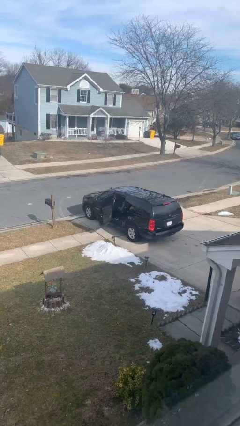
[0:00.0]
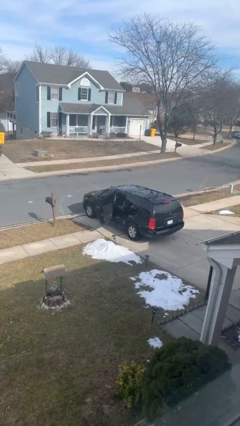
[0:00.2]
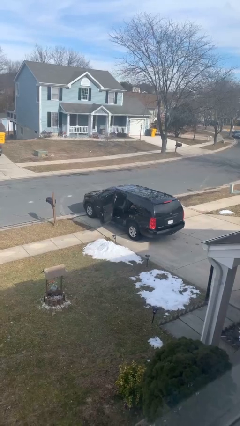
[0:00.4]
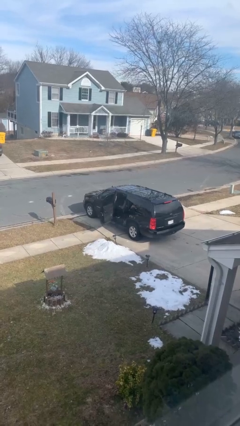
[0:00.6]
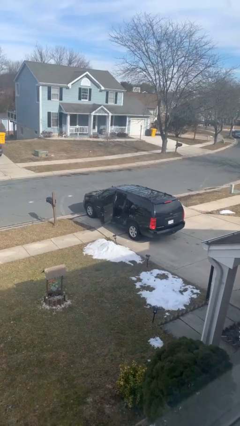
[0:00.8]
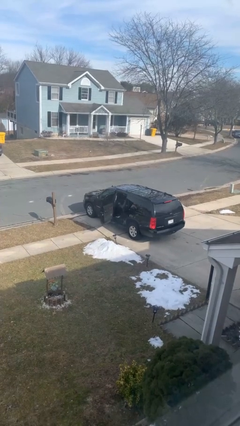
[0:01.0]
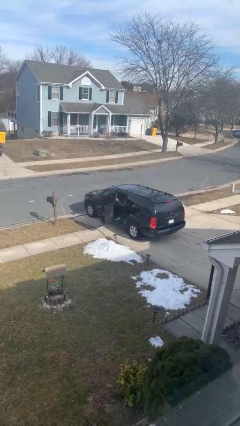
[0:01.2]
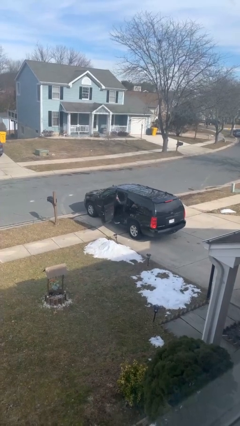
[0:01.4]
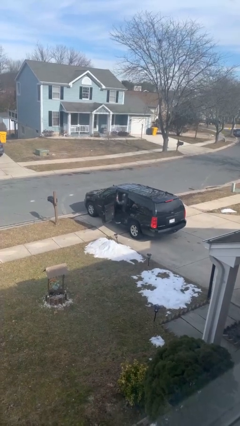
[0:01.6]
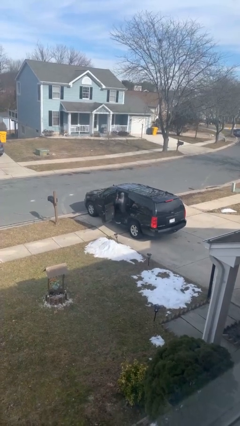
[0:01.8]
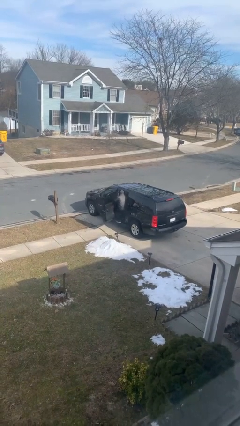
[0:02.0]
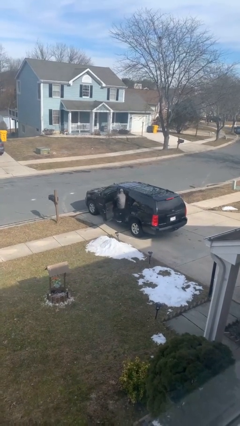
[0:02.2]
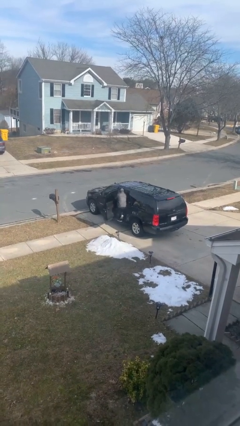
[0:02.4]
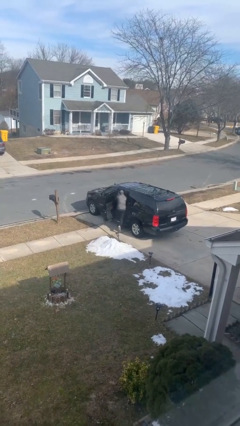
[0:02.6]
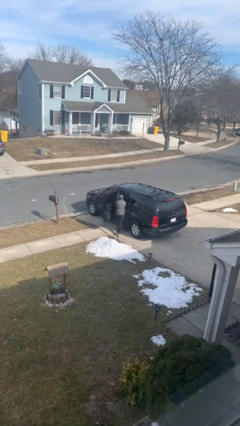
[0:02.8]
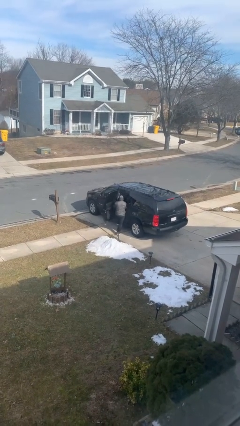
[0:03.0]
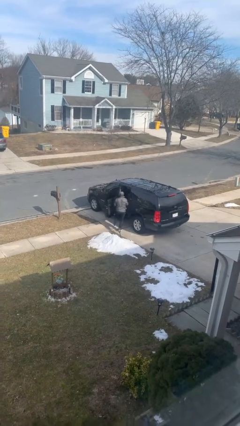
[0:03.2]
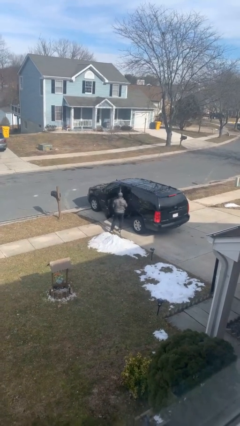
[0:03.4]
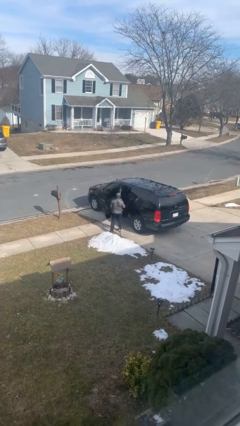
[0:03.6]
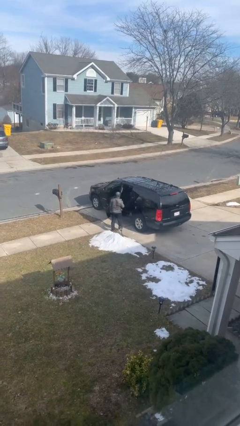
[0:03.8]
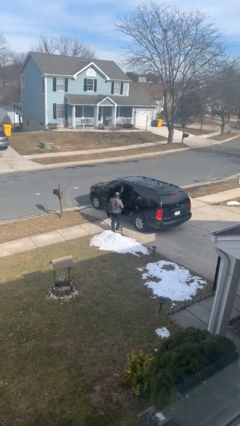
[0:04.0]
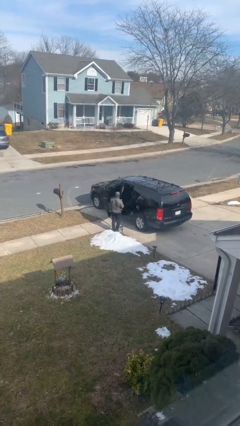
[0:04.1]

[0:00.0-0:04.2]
person exits car

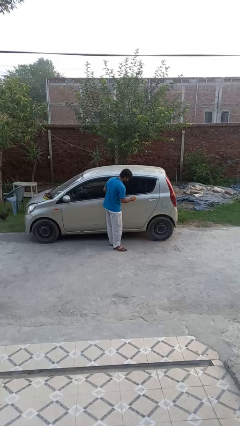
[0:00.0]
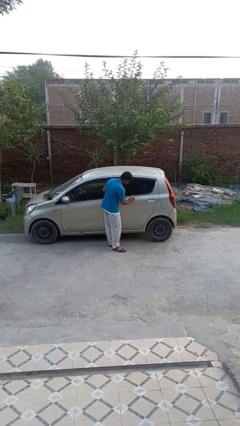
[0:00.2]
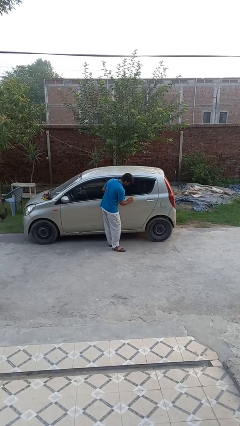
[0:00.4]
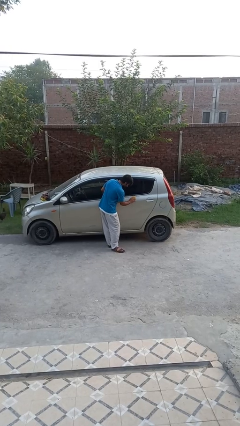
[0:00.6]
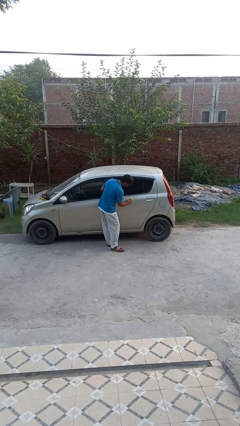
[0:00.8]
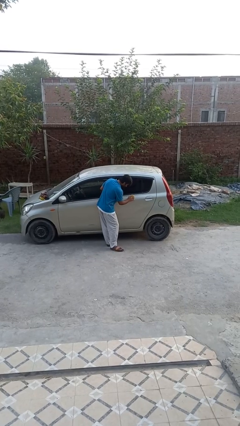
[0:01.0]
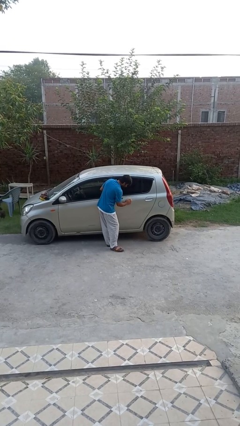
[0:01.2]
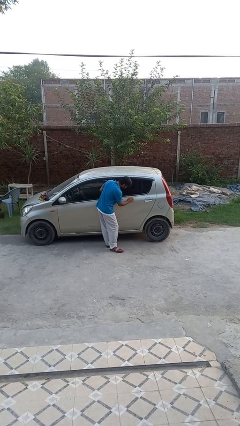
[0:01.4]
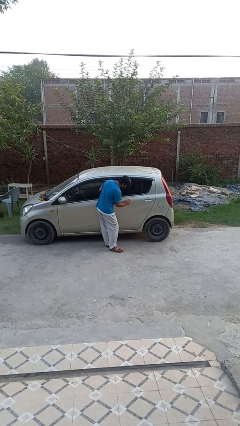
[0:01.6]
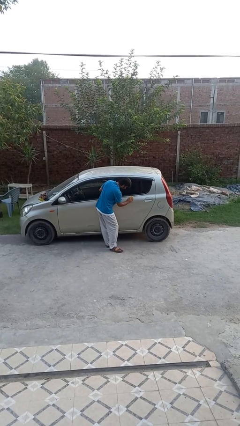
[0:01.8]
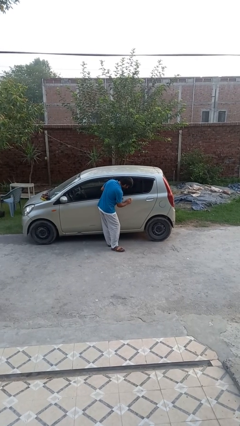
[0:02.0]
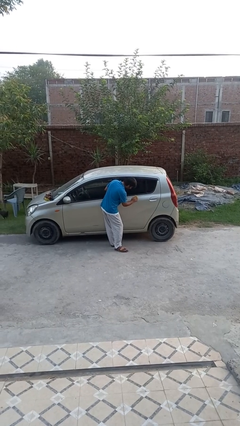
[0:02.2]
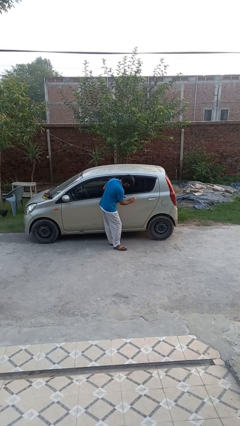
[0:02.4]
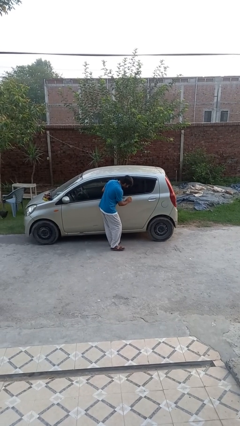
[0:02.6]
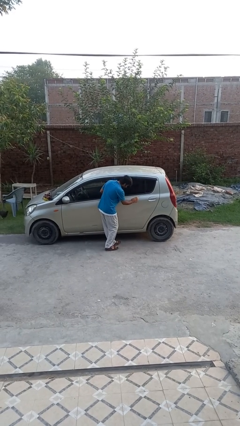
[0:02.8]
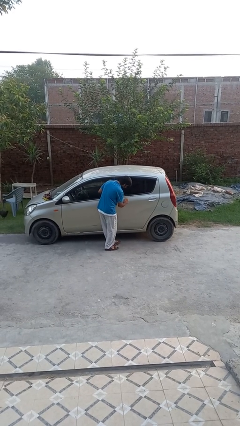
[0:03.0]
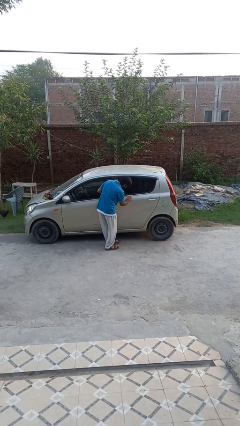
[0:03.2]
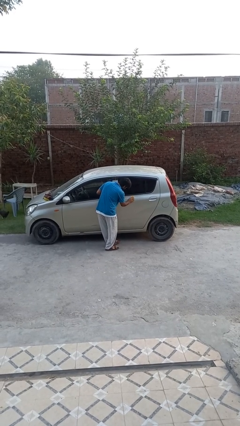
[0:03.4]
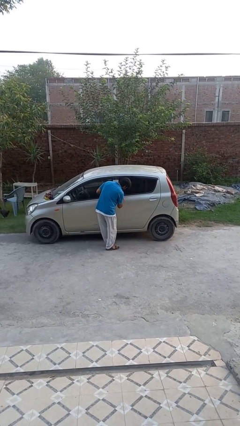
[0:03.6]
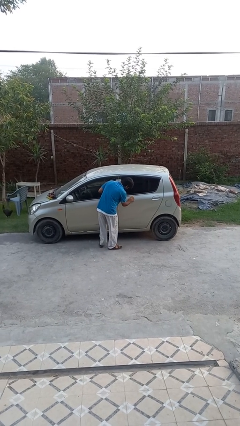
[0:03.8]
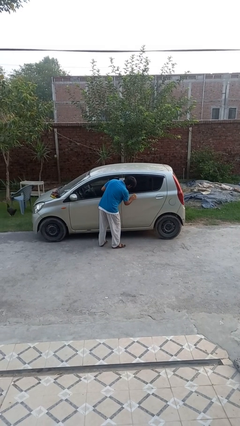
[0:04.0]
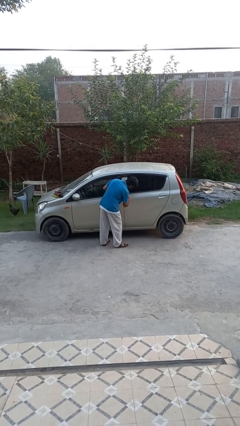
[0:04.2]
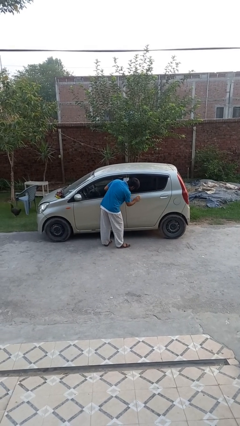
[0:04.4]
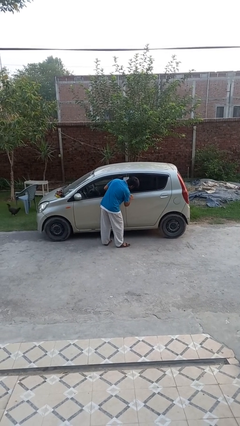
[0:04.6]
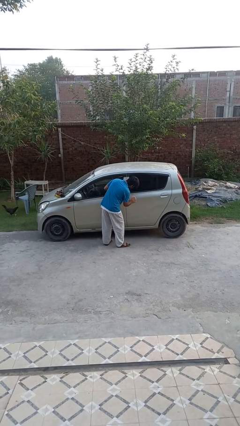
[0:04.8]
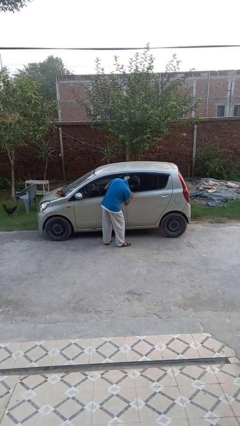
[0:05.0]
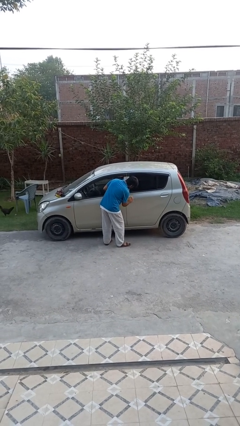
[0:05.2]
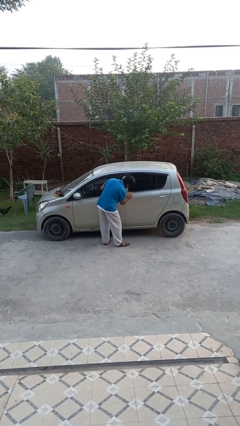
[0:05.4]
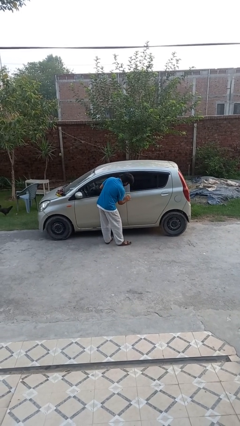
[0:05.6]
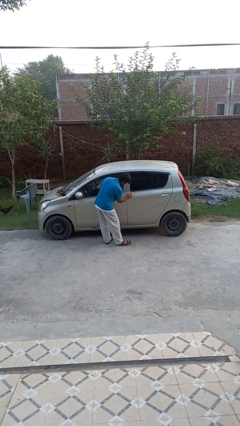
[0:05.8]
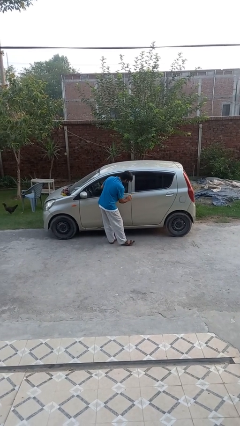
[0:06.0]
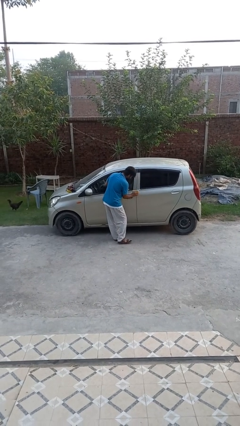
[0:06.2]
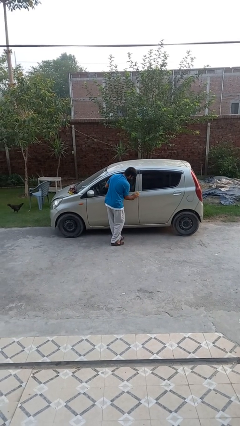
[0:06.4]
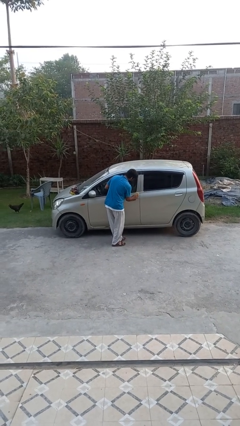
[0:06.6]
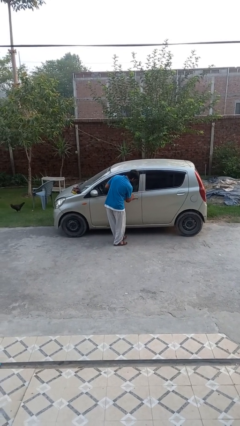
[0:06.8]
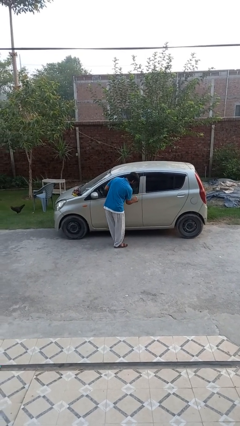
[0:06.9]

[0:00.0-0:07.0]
person polishes car with rag

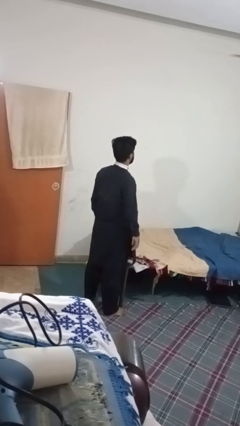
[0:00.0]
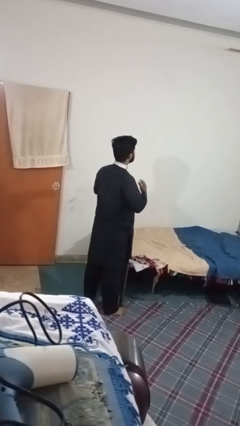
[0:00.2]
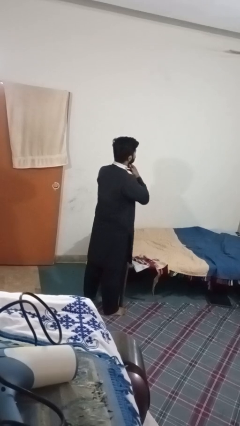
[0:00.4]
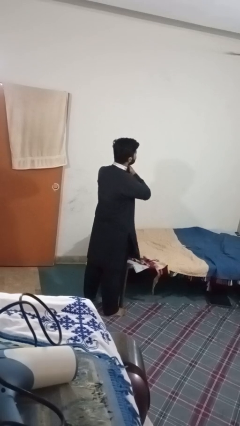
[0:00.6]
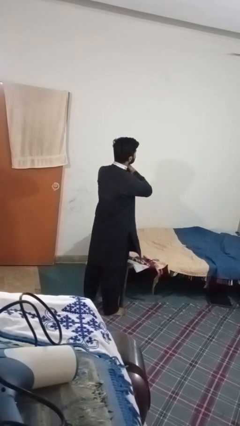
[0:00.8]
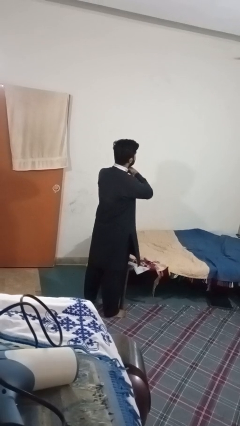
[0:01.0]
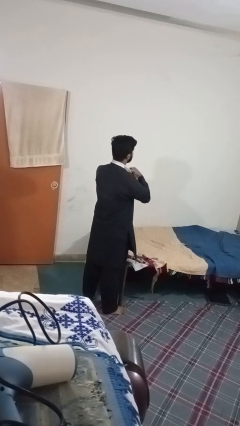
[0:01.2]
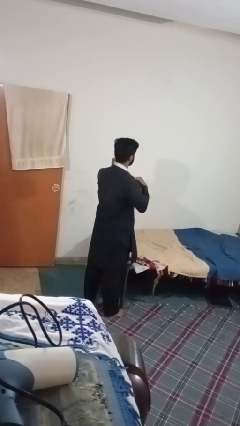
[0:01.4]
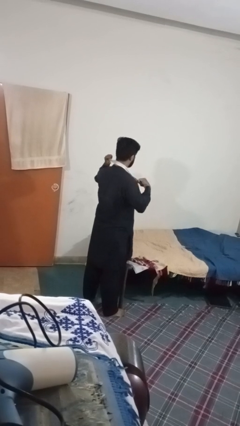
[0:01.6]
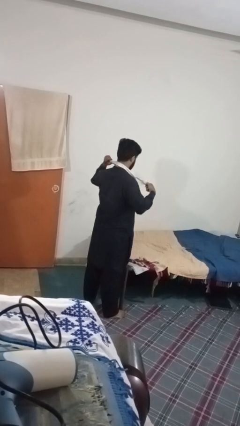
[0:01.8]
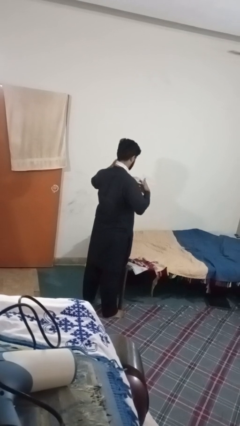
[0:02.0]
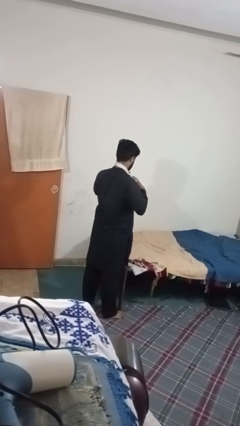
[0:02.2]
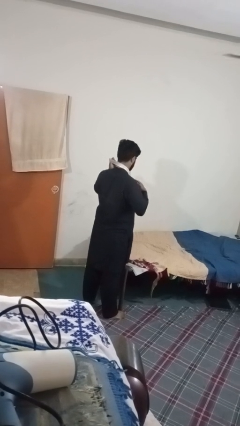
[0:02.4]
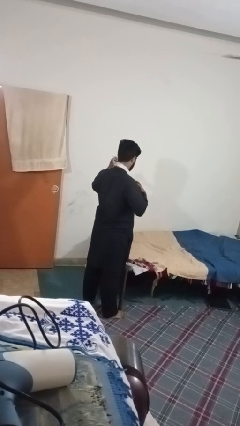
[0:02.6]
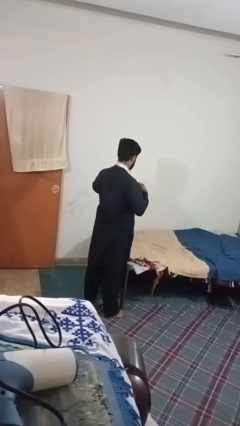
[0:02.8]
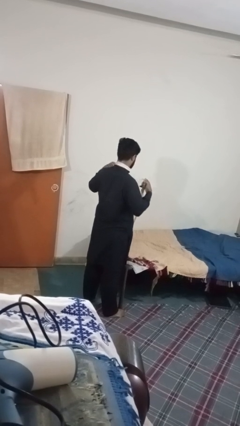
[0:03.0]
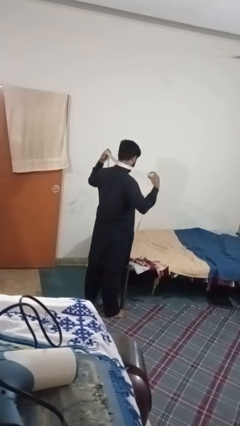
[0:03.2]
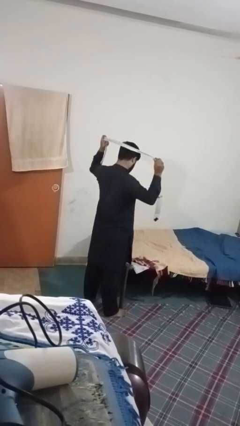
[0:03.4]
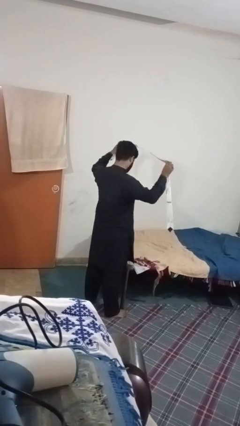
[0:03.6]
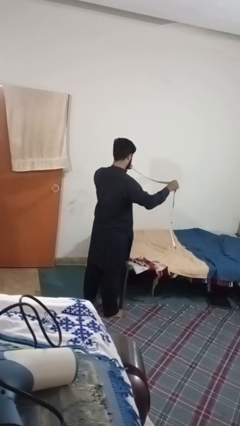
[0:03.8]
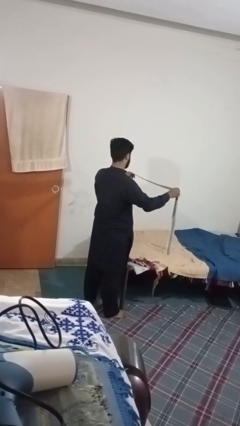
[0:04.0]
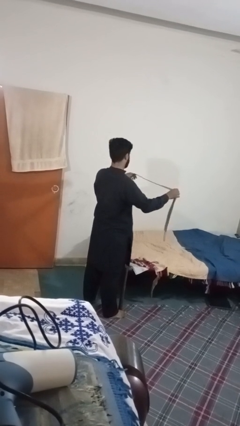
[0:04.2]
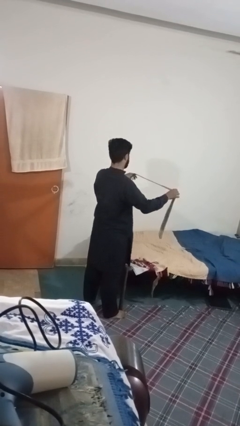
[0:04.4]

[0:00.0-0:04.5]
person takes off necktie

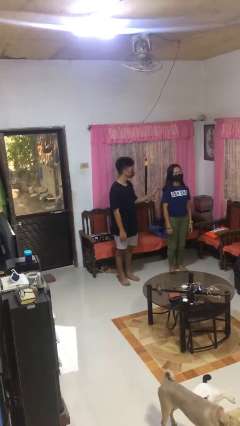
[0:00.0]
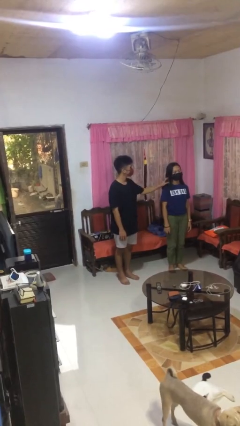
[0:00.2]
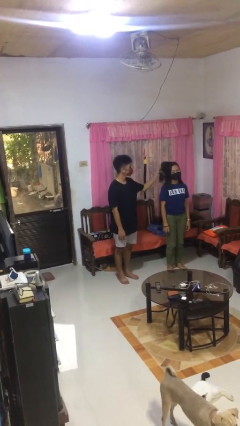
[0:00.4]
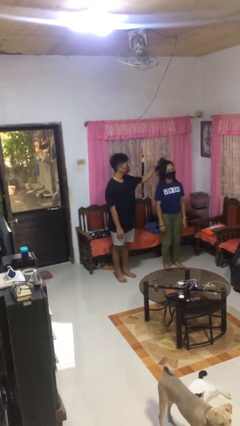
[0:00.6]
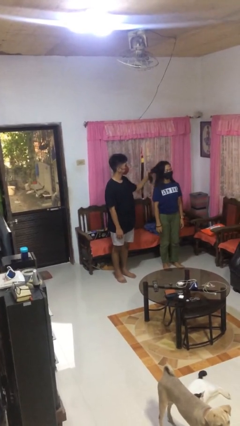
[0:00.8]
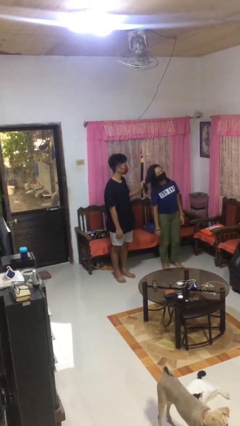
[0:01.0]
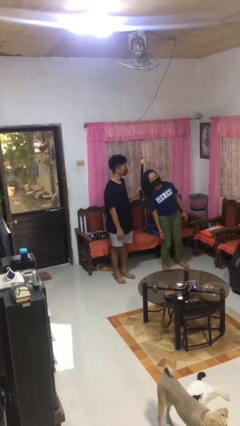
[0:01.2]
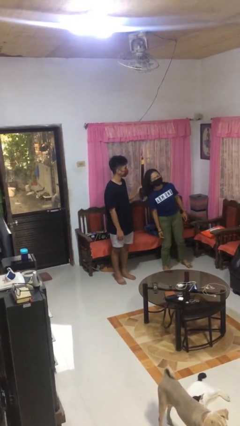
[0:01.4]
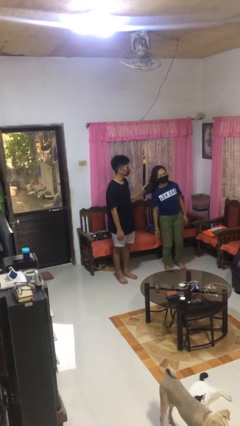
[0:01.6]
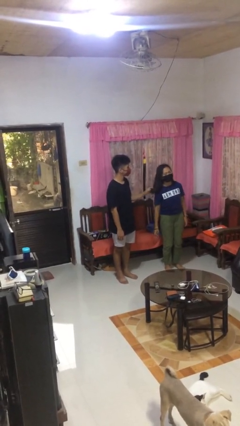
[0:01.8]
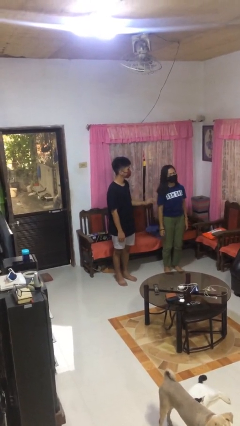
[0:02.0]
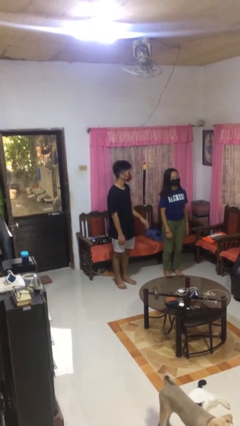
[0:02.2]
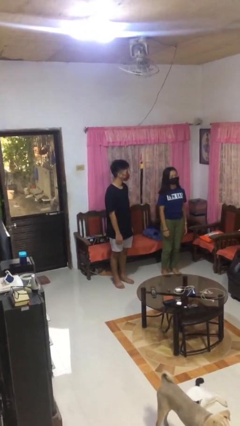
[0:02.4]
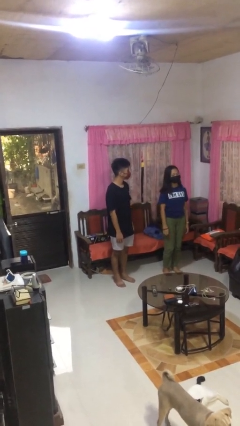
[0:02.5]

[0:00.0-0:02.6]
person grabs person by hair
